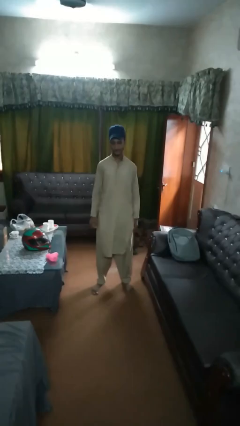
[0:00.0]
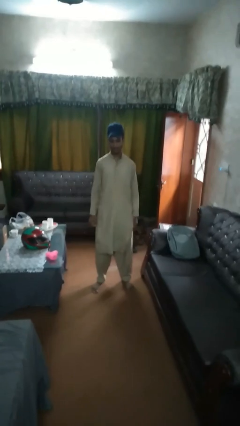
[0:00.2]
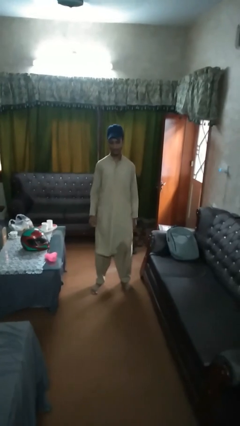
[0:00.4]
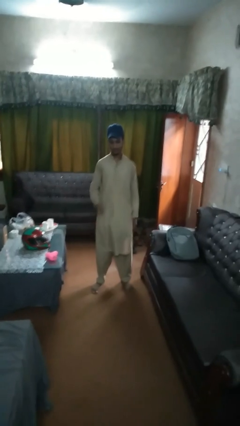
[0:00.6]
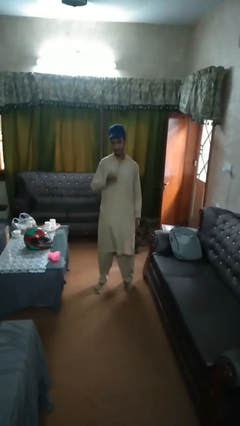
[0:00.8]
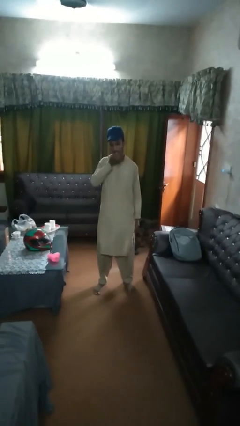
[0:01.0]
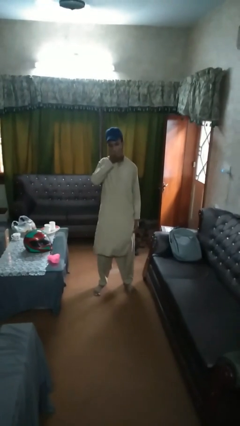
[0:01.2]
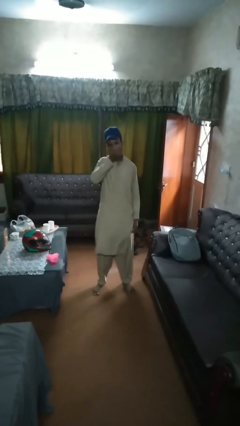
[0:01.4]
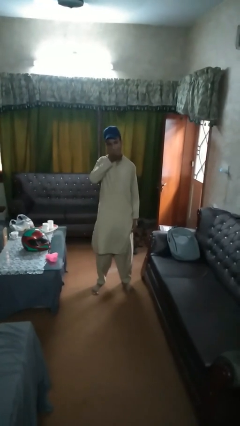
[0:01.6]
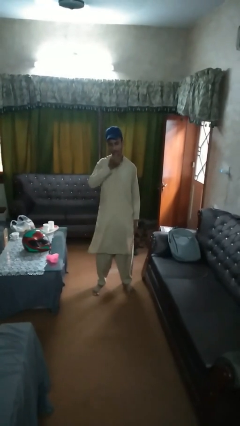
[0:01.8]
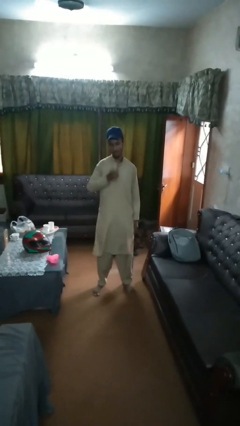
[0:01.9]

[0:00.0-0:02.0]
person eats apple

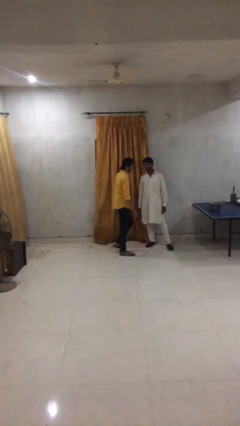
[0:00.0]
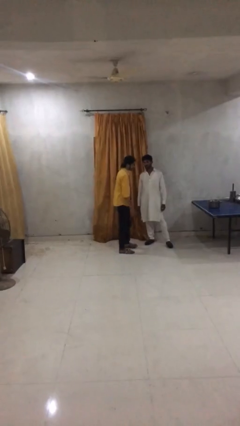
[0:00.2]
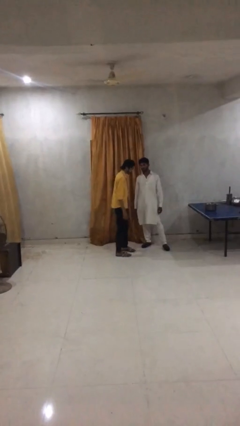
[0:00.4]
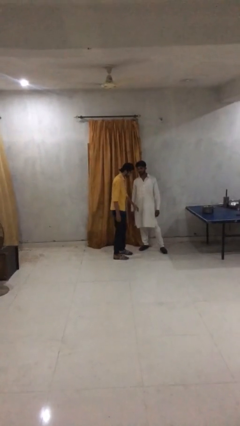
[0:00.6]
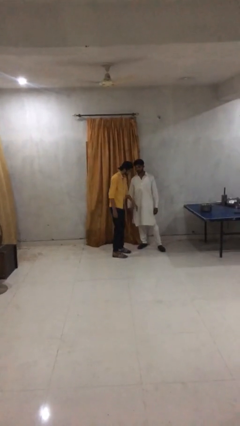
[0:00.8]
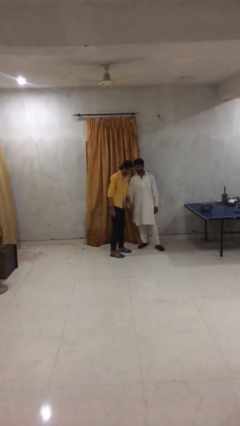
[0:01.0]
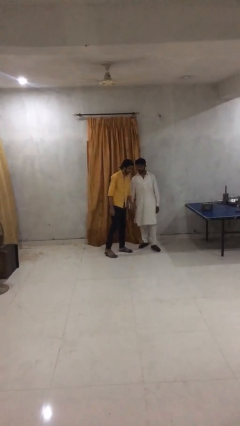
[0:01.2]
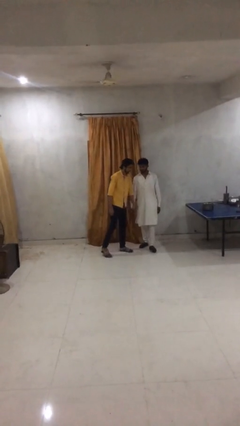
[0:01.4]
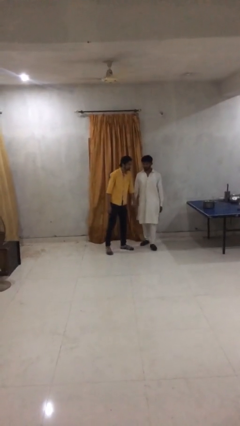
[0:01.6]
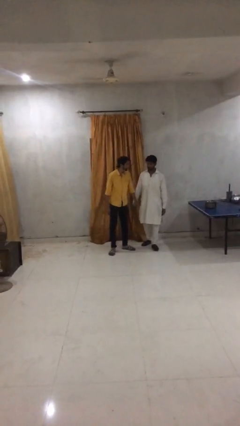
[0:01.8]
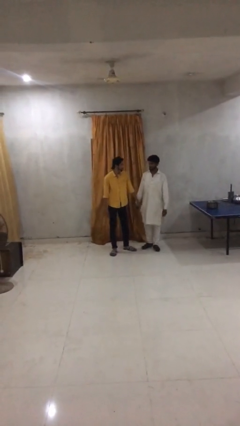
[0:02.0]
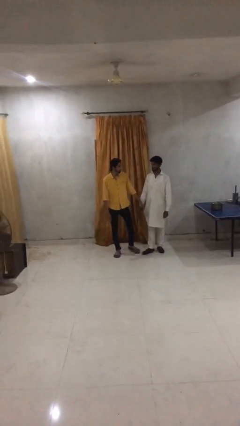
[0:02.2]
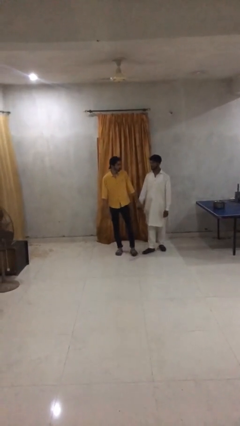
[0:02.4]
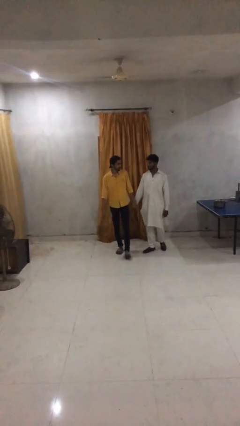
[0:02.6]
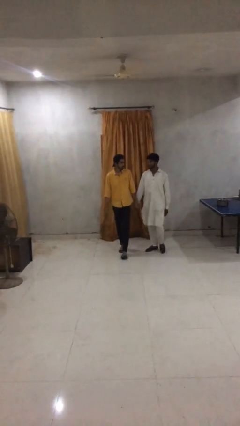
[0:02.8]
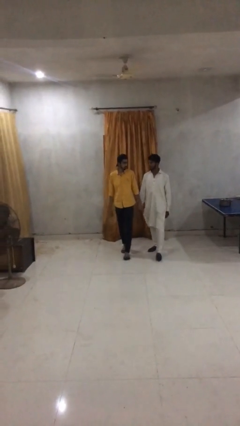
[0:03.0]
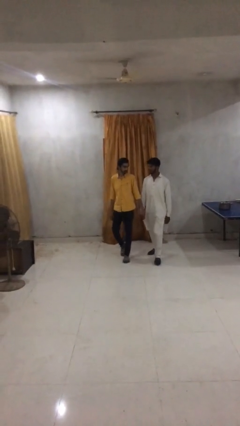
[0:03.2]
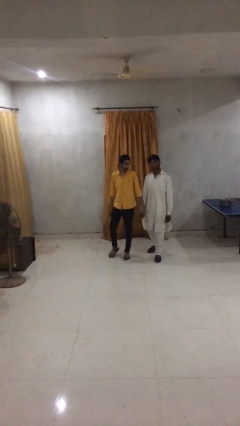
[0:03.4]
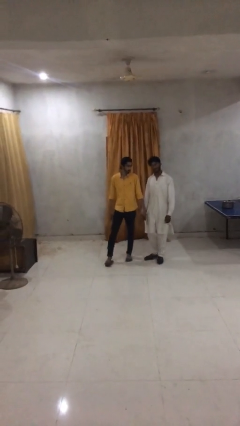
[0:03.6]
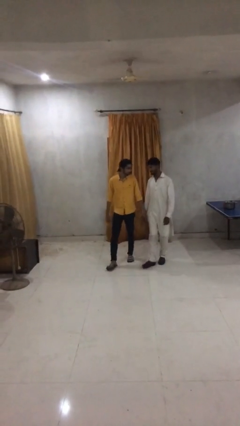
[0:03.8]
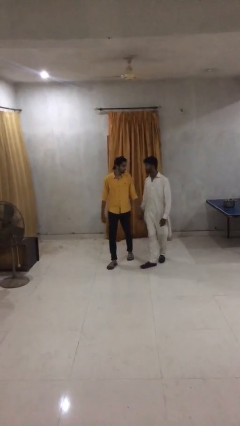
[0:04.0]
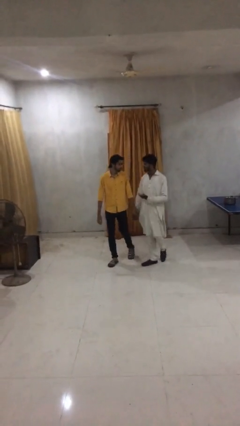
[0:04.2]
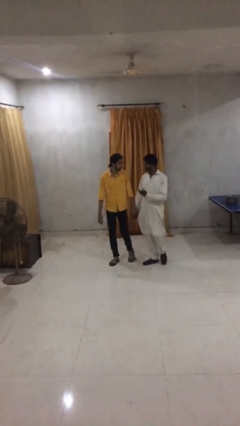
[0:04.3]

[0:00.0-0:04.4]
person holds hand

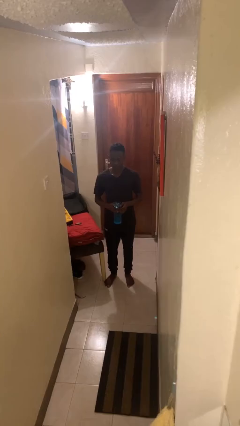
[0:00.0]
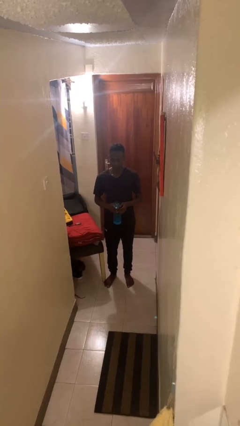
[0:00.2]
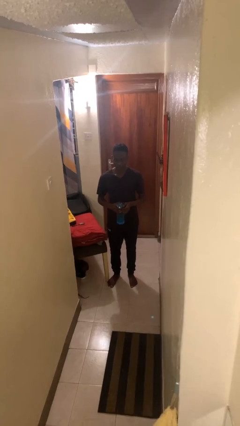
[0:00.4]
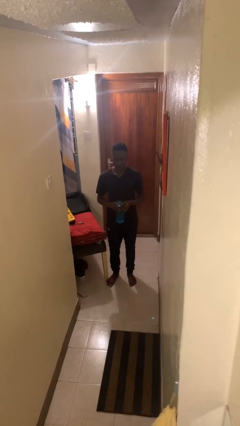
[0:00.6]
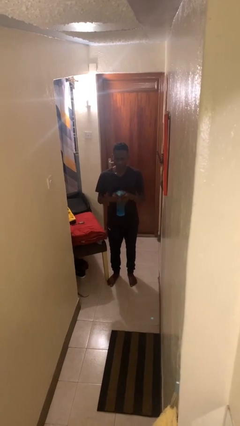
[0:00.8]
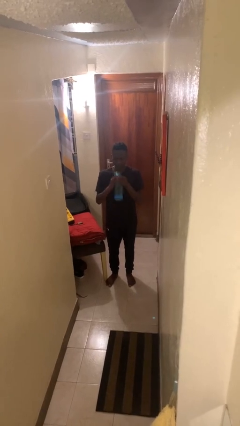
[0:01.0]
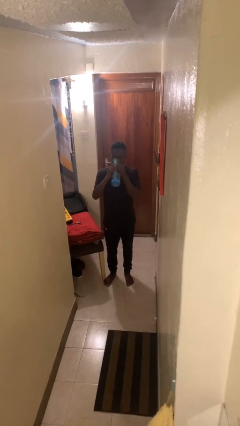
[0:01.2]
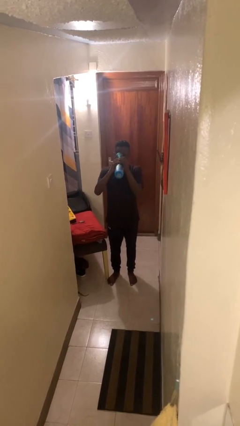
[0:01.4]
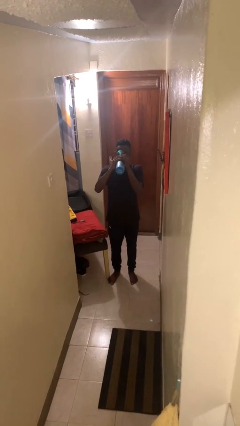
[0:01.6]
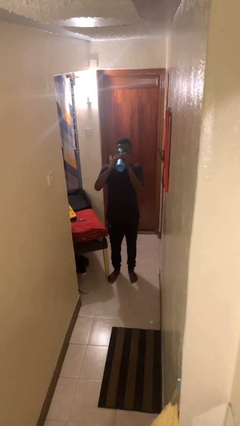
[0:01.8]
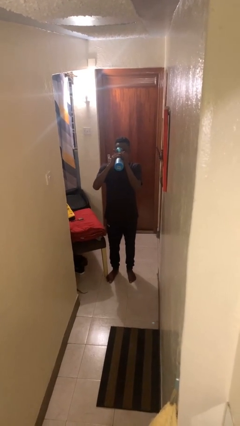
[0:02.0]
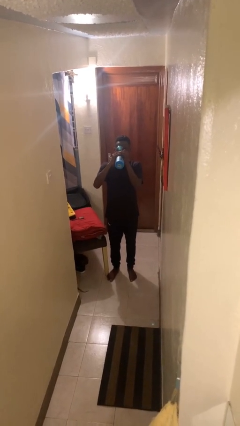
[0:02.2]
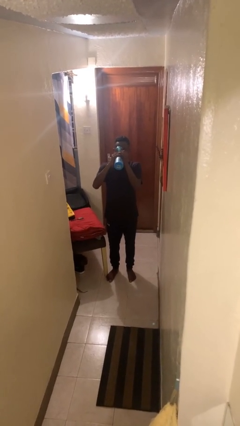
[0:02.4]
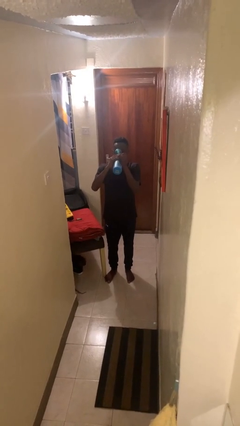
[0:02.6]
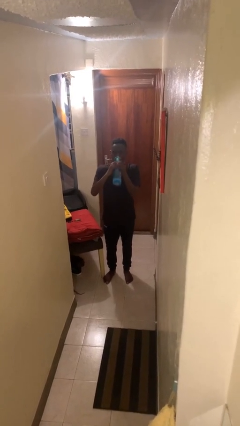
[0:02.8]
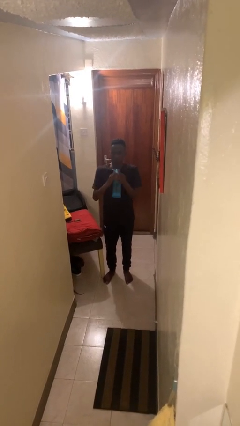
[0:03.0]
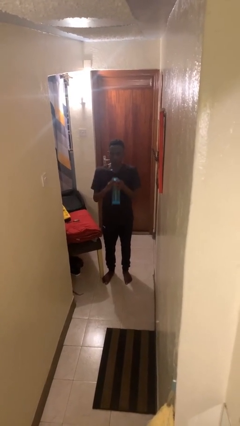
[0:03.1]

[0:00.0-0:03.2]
person drinks from bottle

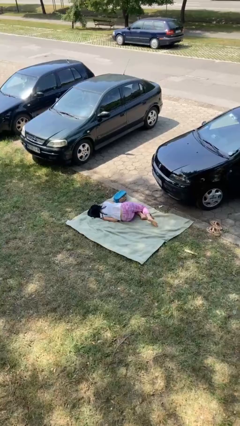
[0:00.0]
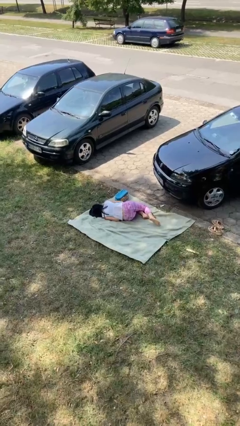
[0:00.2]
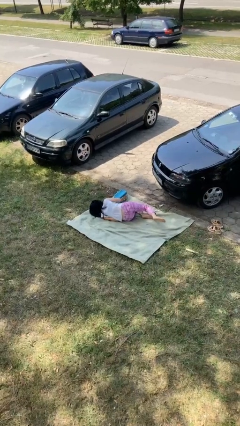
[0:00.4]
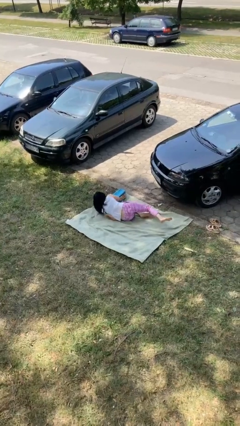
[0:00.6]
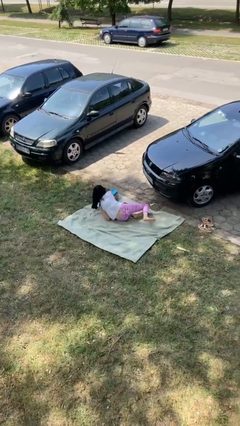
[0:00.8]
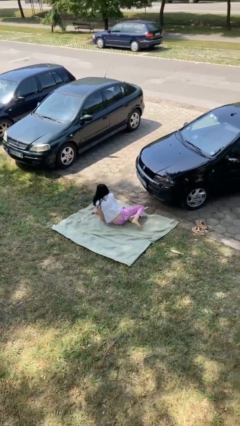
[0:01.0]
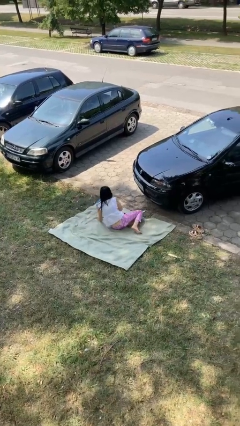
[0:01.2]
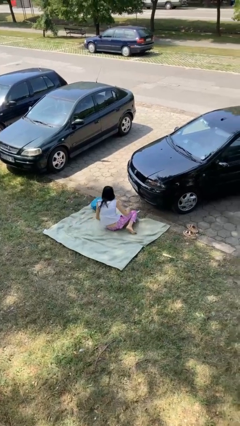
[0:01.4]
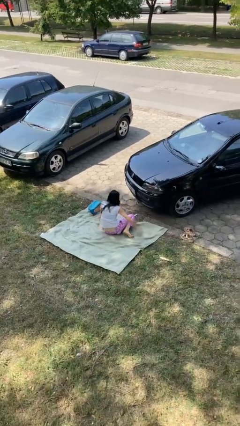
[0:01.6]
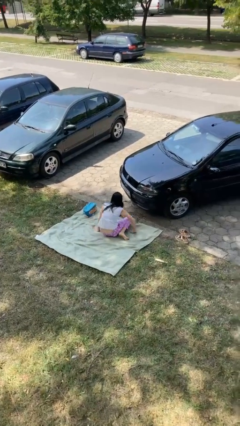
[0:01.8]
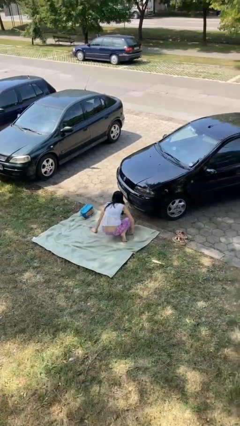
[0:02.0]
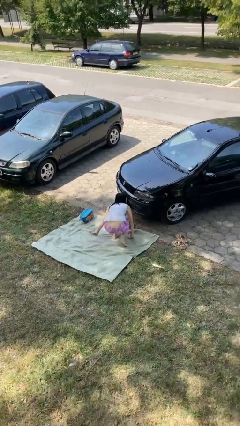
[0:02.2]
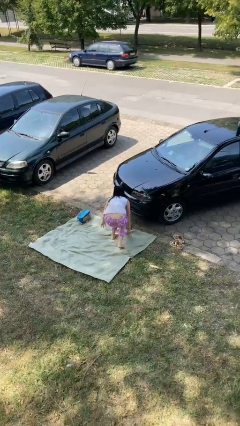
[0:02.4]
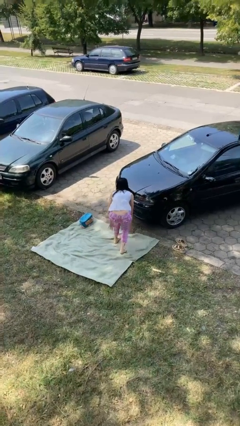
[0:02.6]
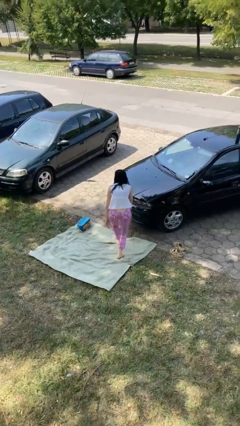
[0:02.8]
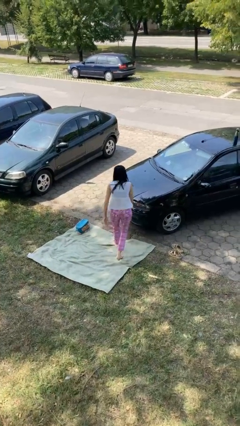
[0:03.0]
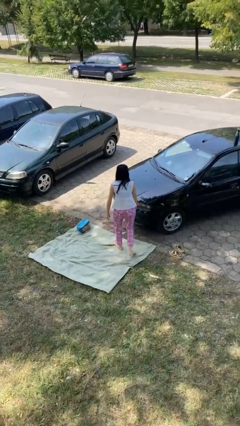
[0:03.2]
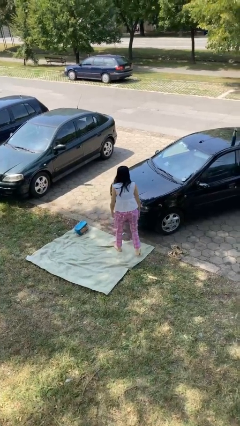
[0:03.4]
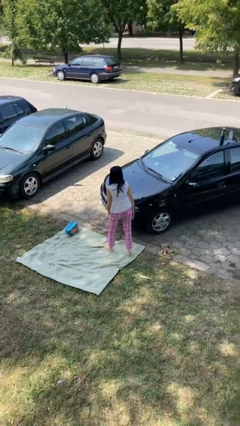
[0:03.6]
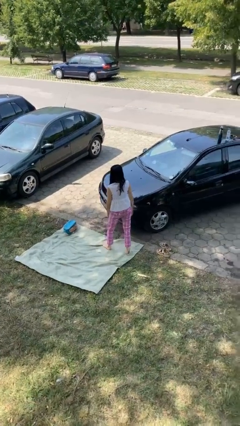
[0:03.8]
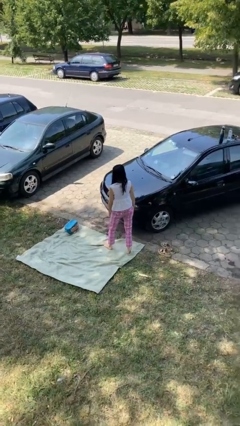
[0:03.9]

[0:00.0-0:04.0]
person stands up from floor

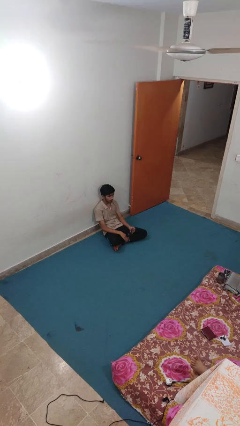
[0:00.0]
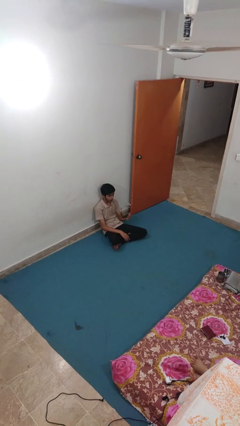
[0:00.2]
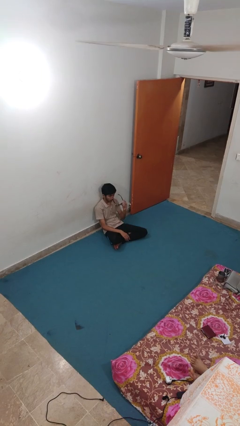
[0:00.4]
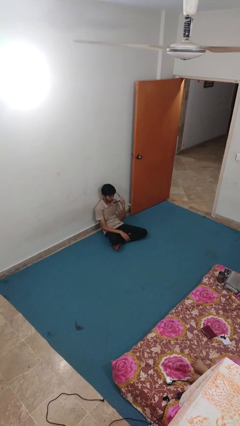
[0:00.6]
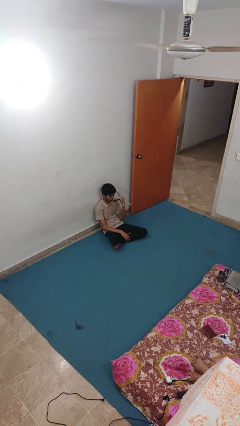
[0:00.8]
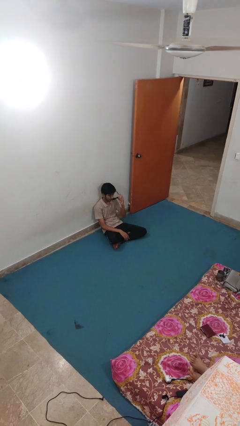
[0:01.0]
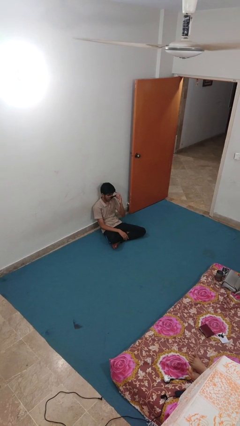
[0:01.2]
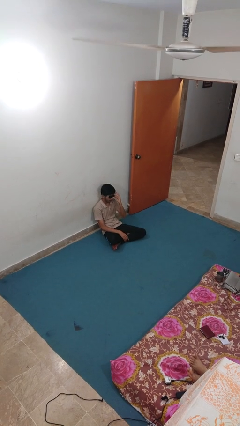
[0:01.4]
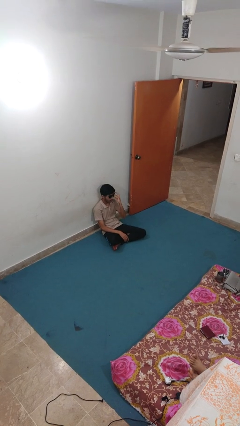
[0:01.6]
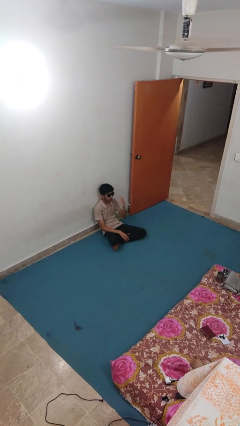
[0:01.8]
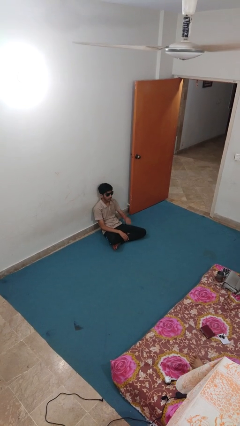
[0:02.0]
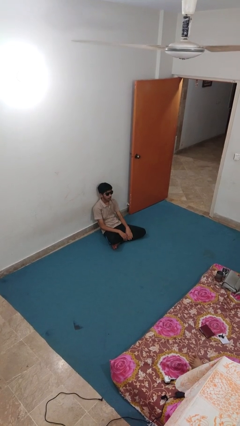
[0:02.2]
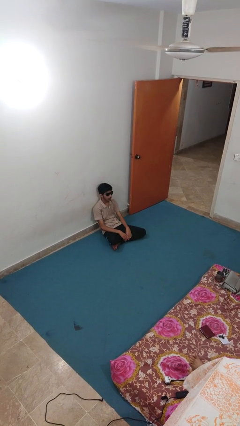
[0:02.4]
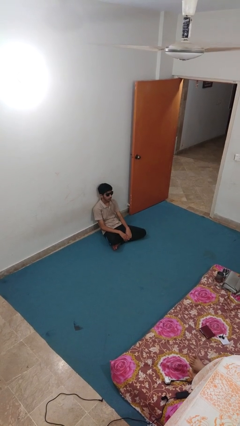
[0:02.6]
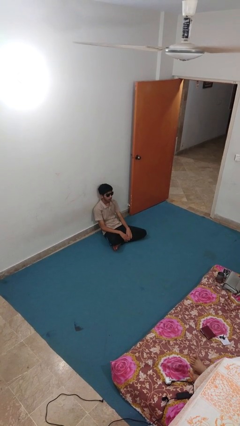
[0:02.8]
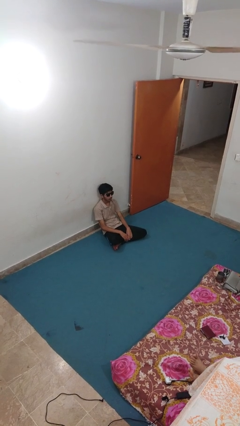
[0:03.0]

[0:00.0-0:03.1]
person puts on sunglasses

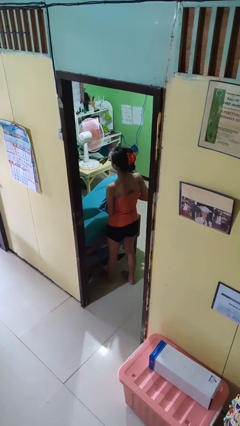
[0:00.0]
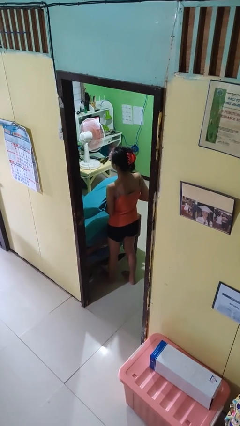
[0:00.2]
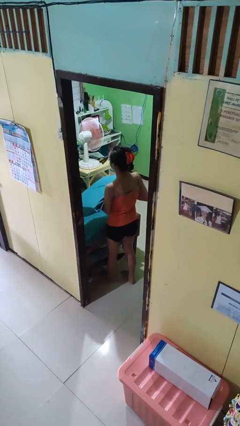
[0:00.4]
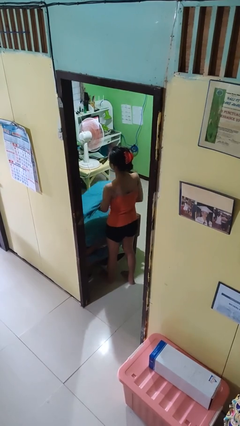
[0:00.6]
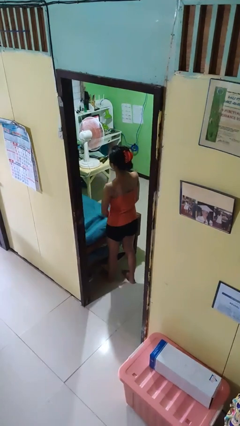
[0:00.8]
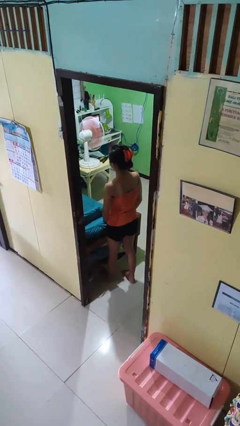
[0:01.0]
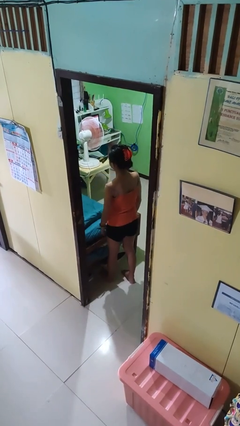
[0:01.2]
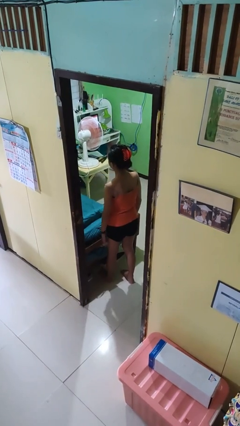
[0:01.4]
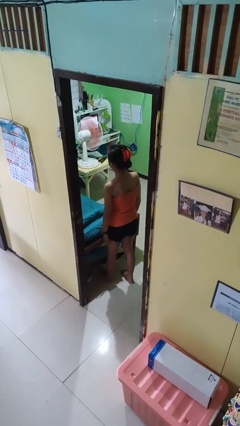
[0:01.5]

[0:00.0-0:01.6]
person puts down object on bed
